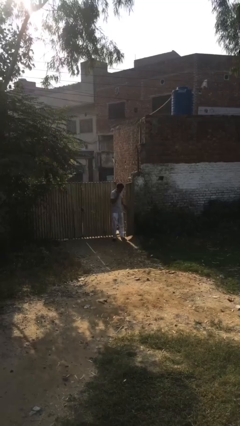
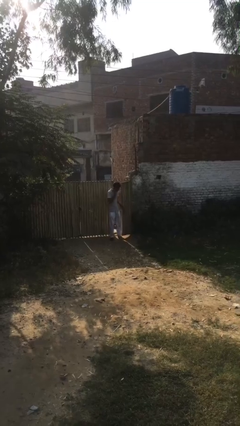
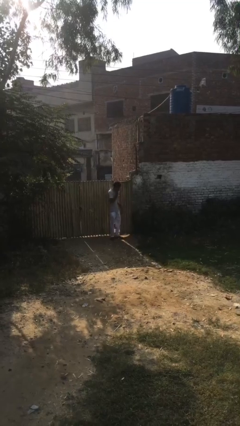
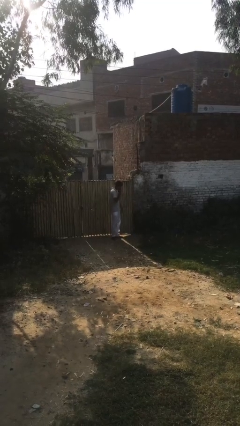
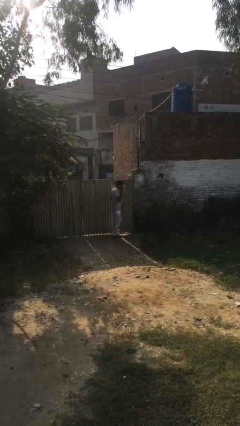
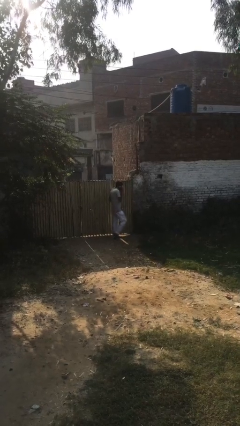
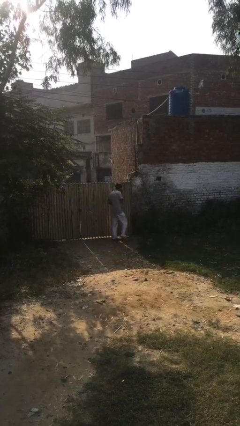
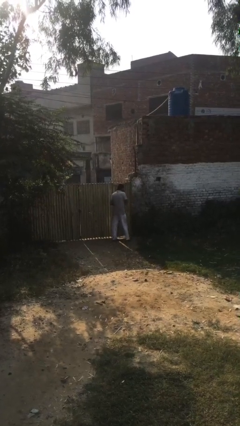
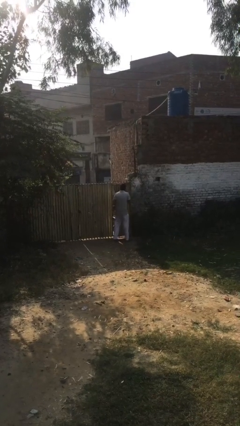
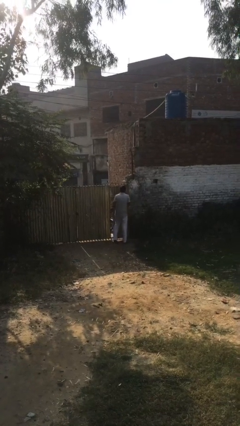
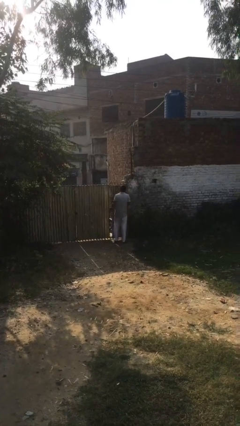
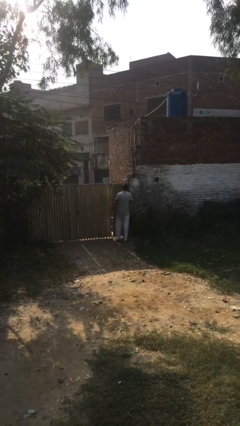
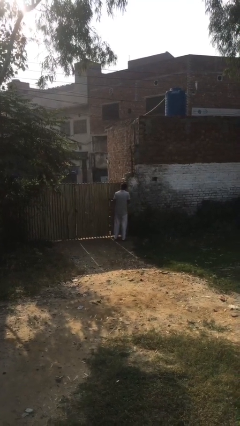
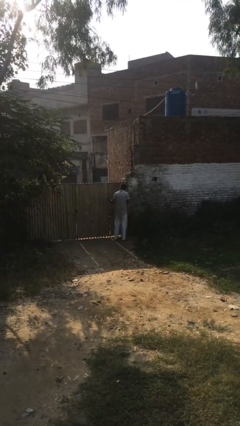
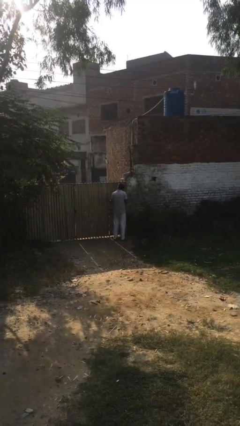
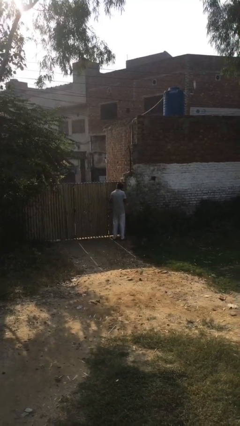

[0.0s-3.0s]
person closes facility door

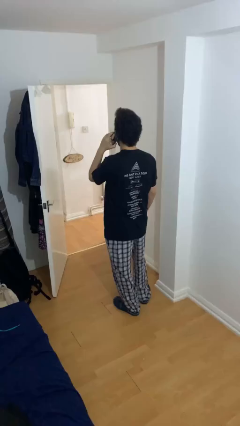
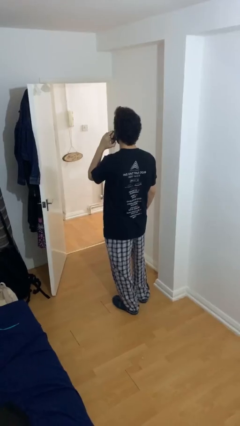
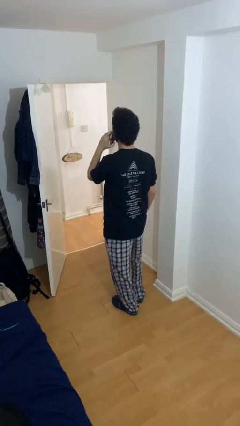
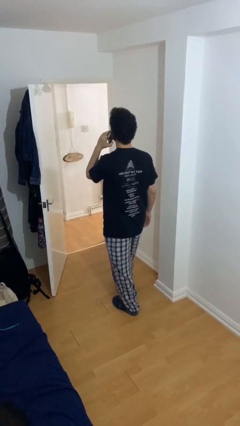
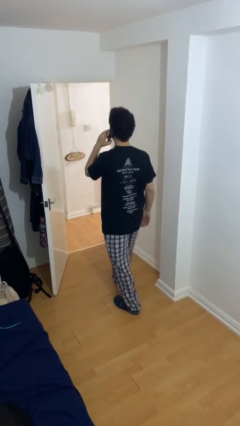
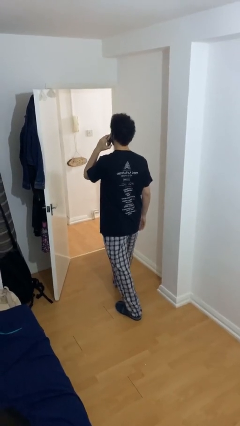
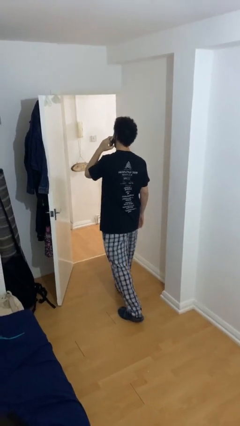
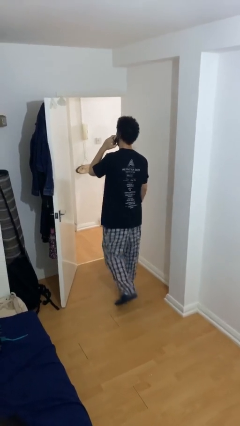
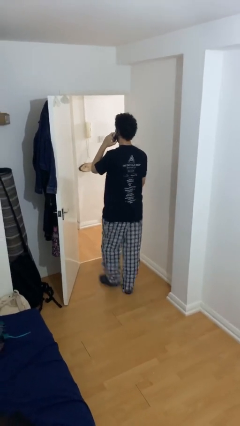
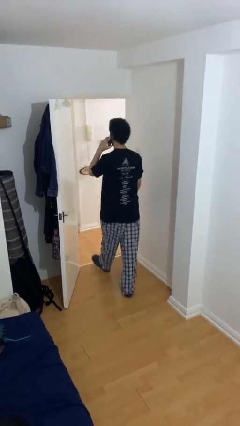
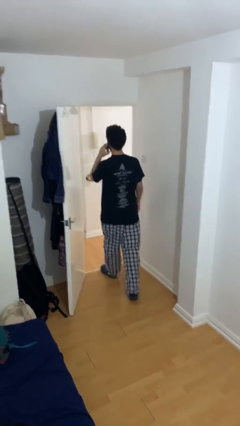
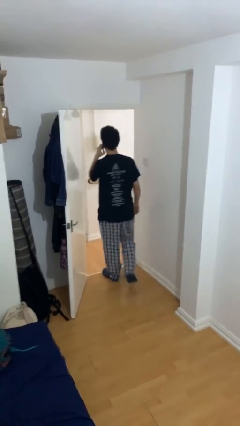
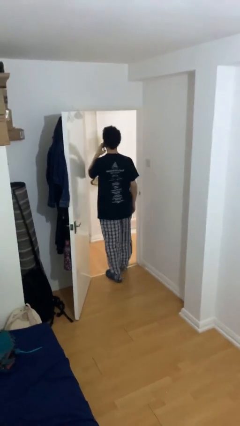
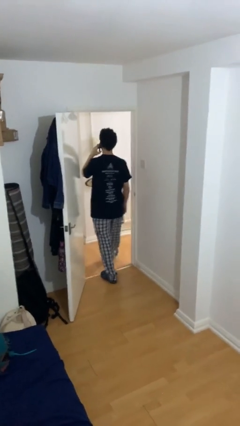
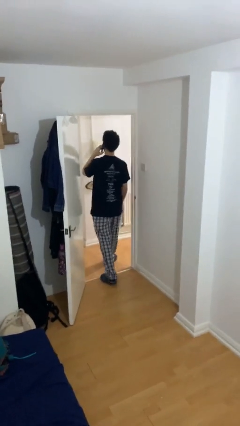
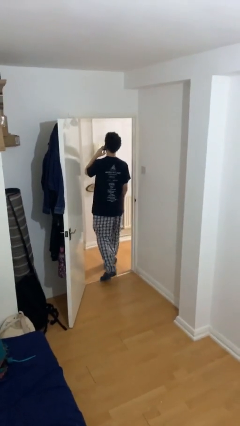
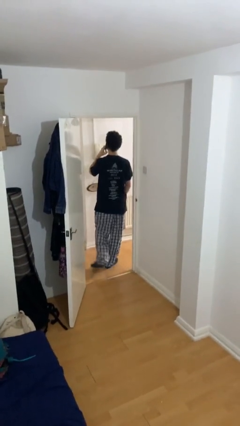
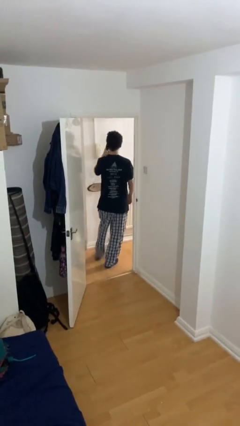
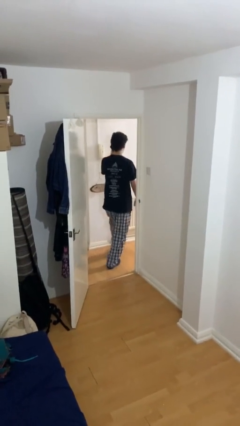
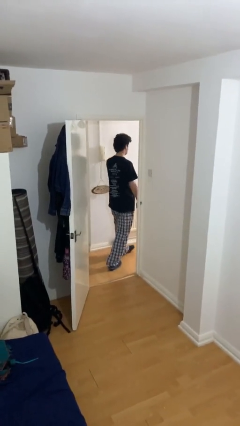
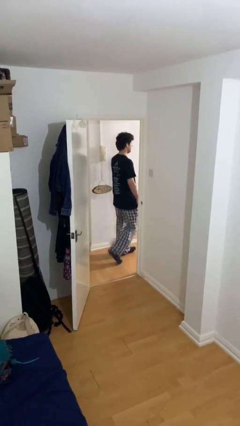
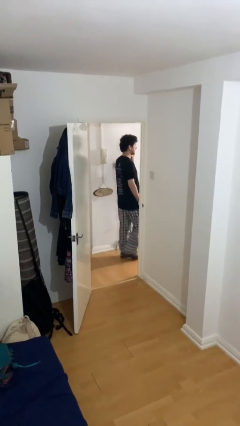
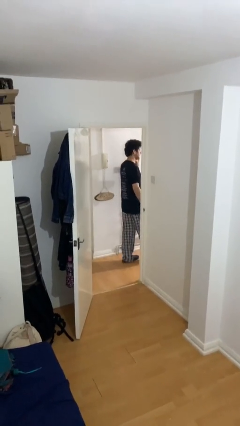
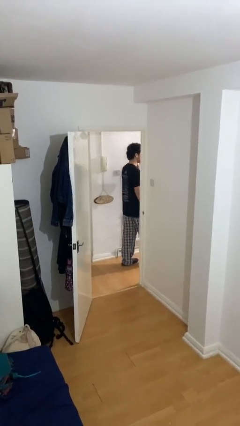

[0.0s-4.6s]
person exits scene through structure

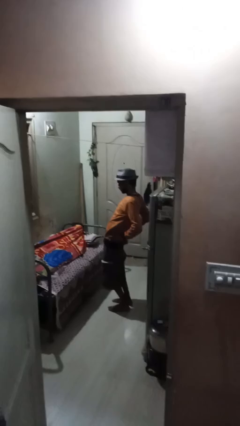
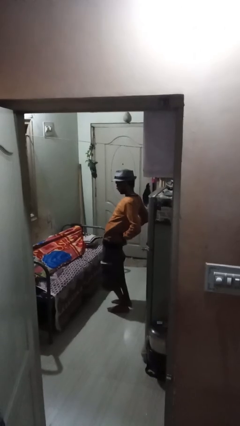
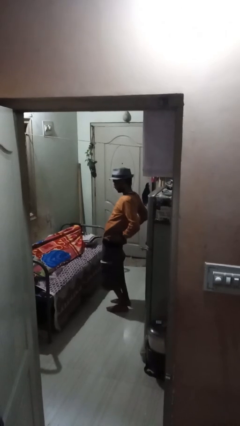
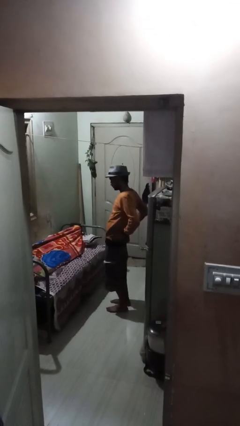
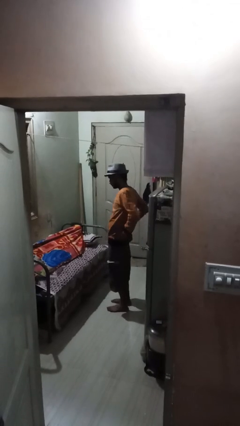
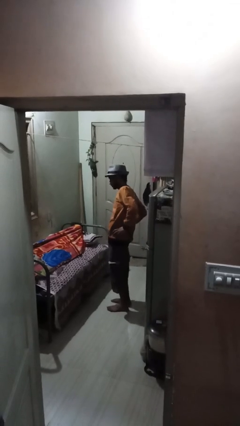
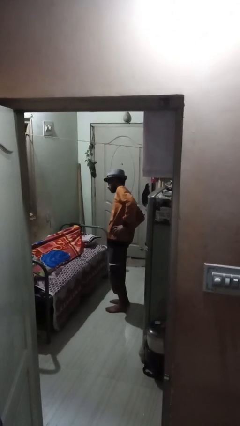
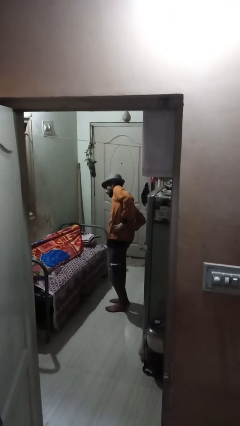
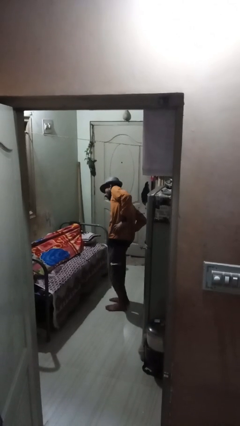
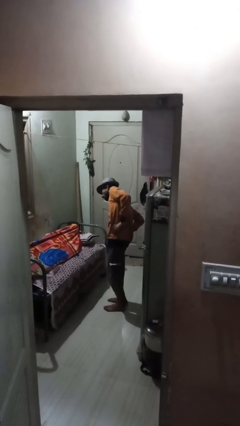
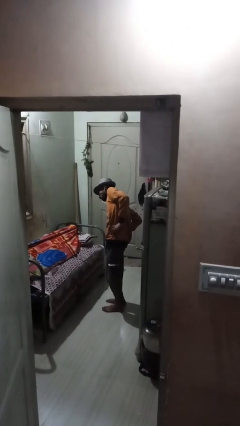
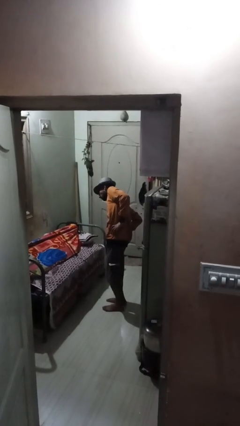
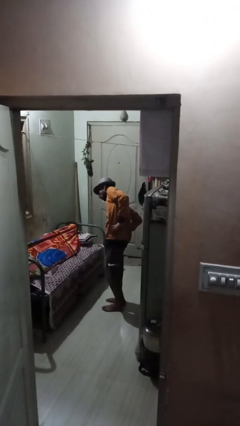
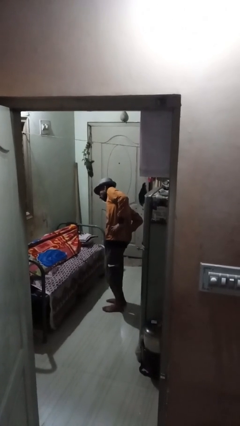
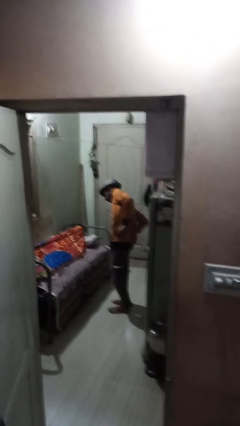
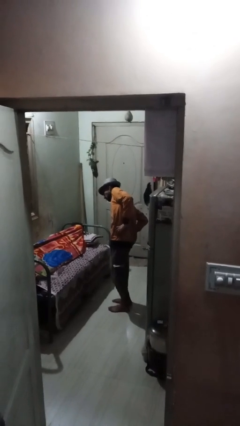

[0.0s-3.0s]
person stretches arms to side

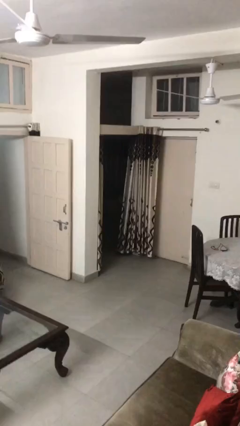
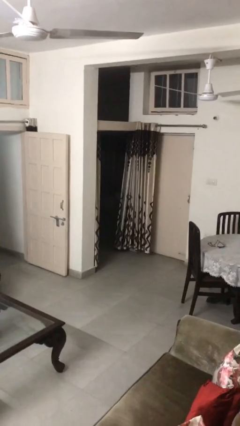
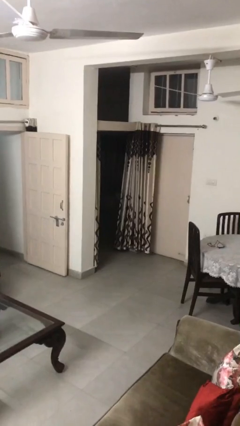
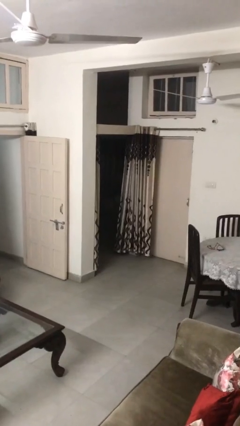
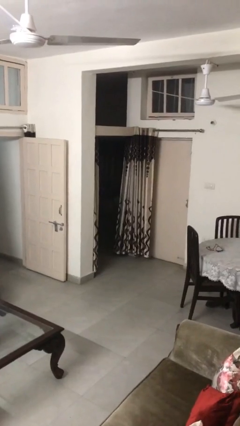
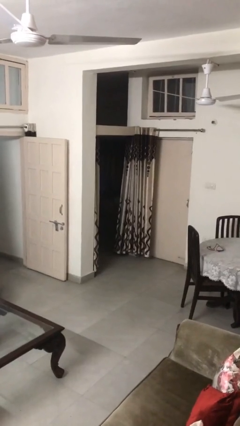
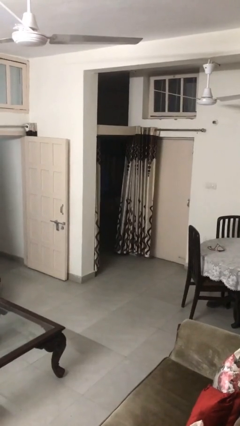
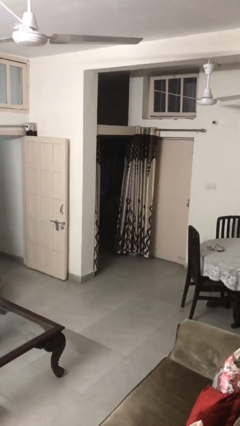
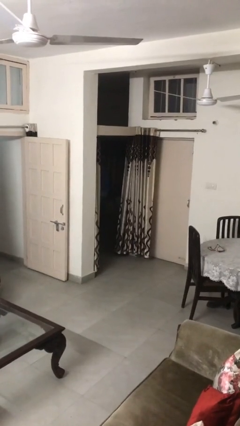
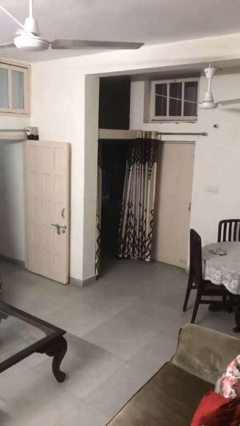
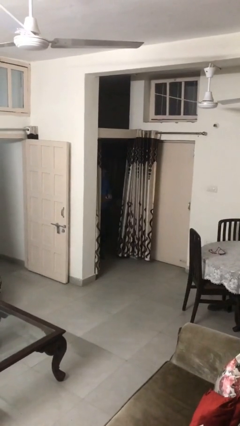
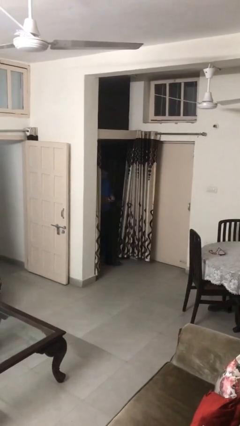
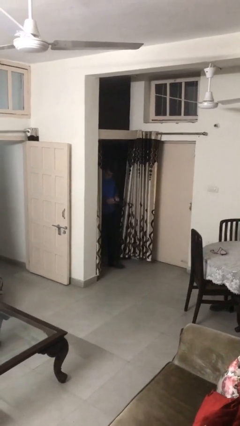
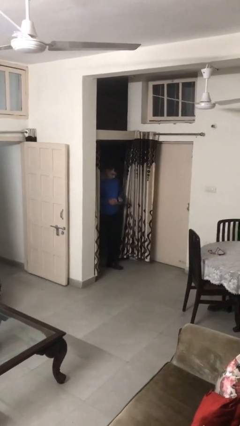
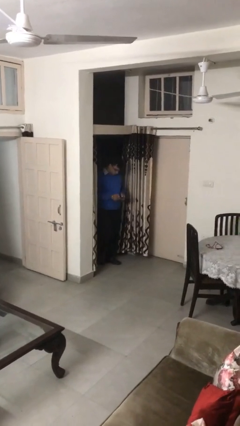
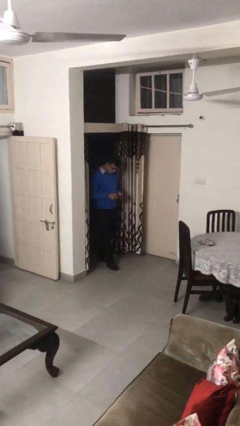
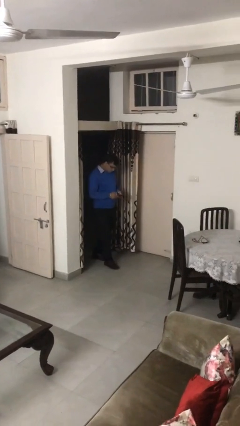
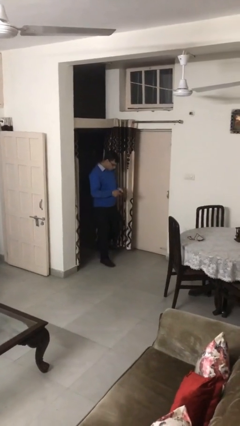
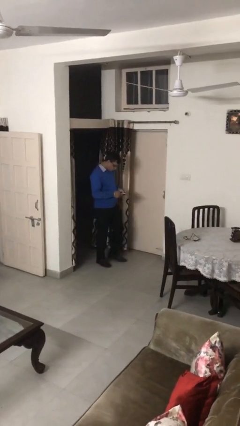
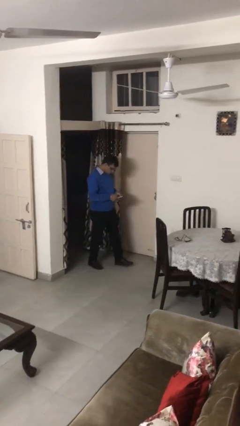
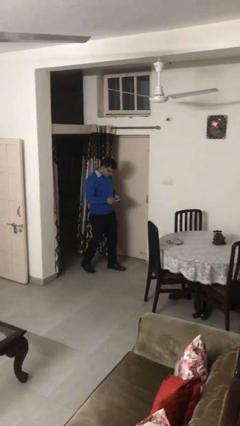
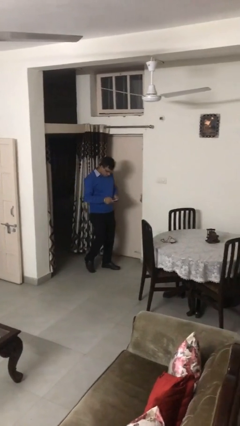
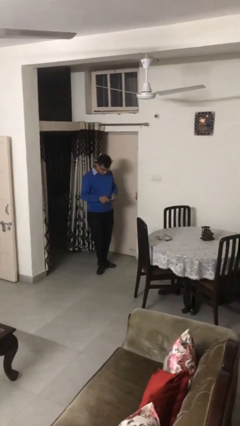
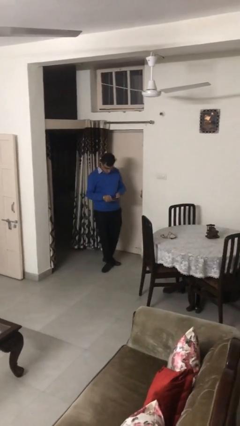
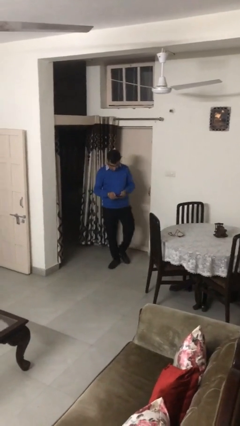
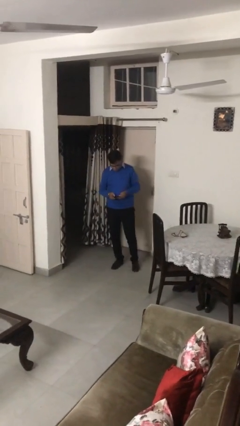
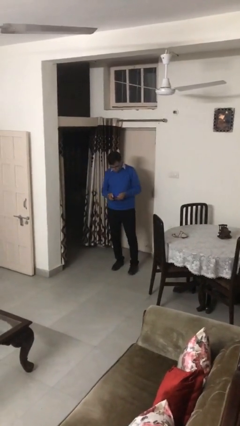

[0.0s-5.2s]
person enters scene through structure

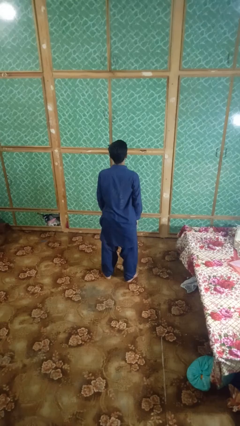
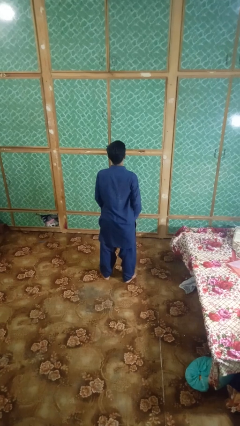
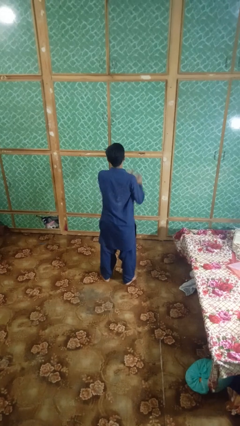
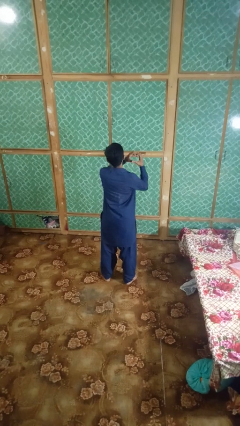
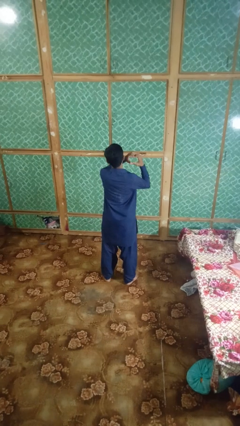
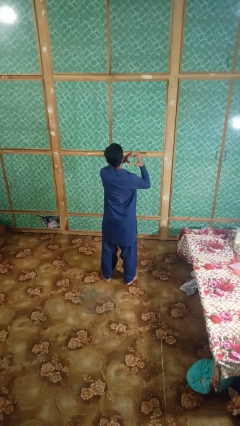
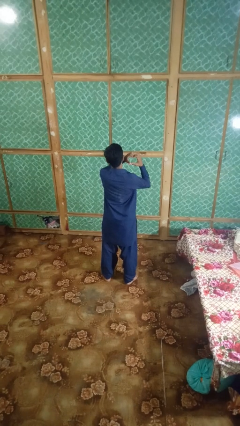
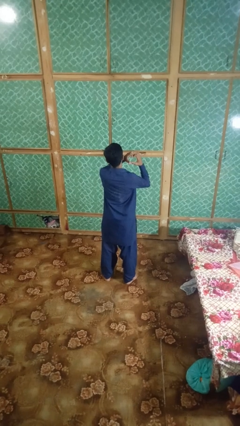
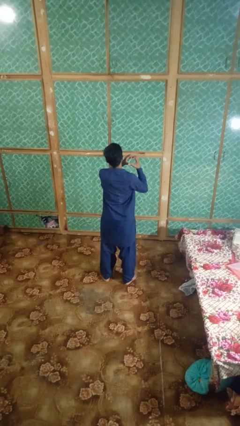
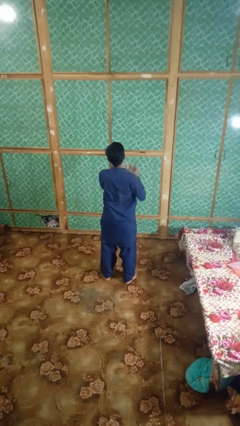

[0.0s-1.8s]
person gestures heart

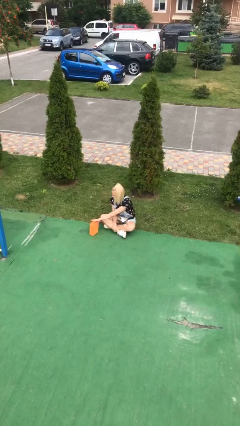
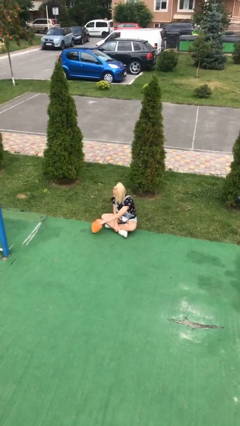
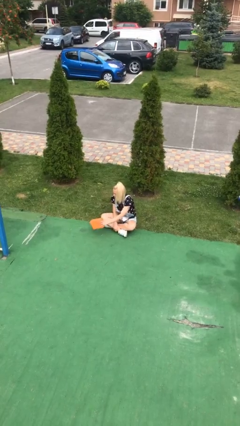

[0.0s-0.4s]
person picks up object from floor
